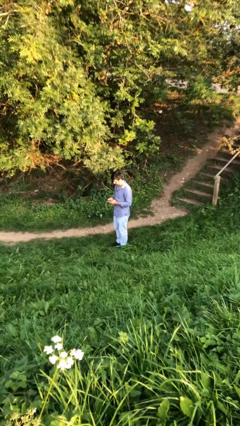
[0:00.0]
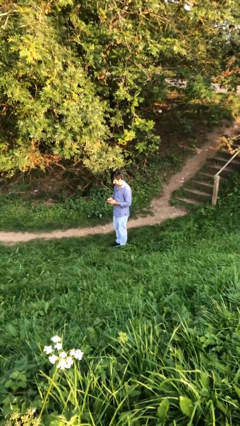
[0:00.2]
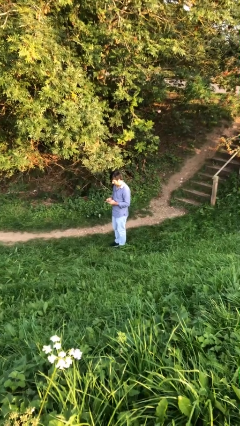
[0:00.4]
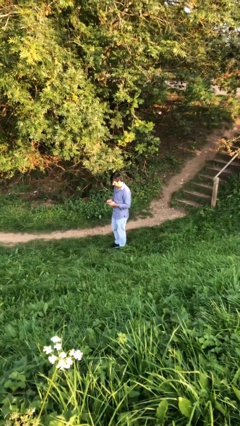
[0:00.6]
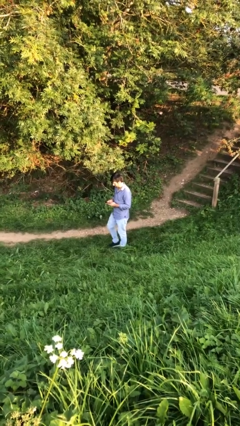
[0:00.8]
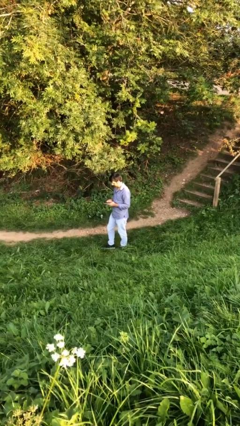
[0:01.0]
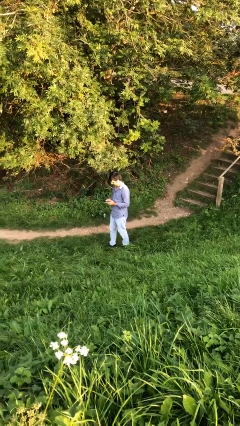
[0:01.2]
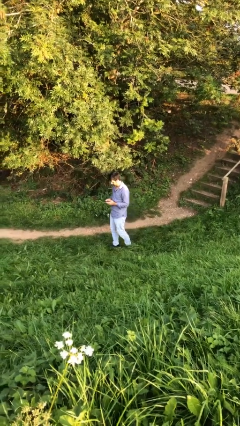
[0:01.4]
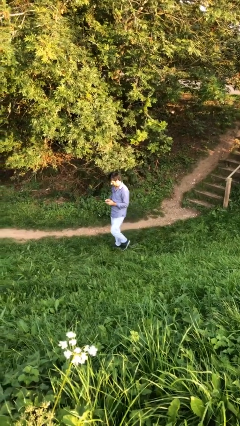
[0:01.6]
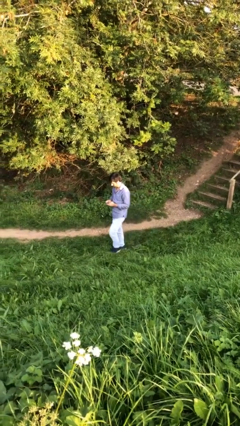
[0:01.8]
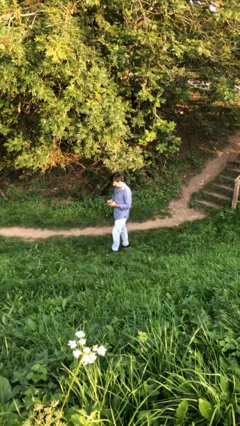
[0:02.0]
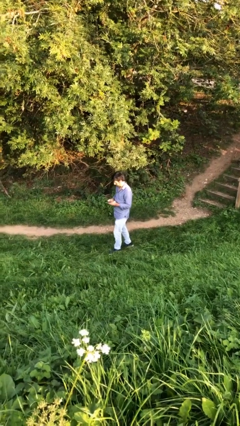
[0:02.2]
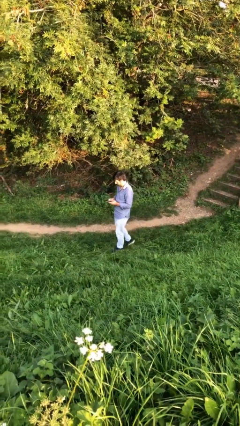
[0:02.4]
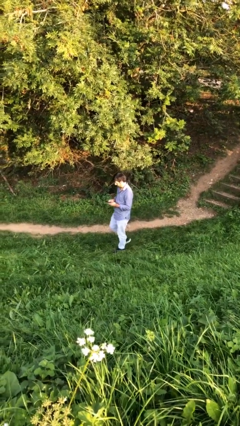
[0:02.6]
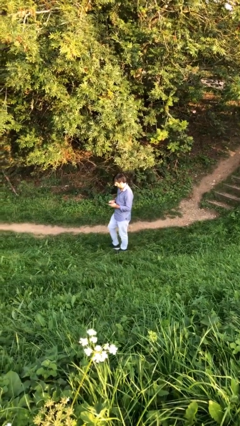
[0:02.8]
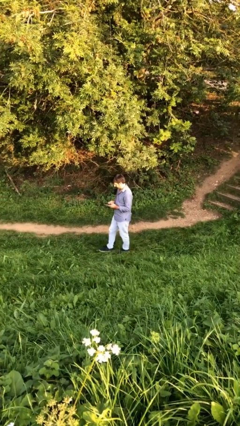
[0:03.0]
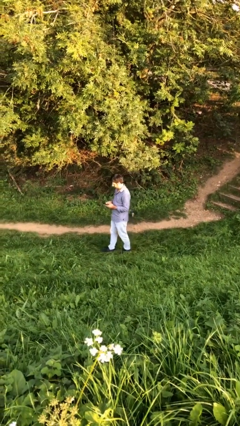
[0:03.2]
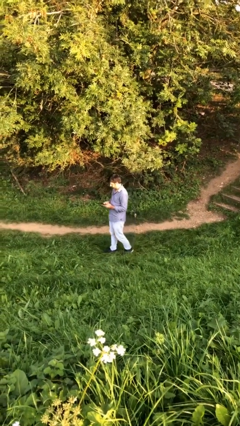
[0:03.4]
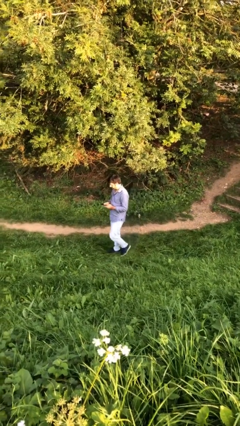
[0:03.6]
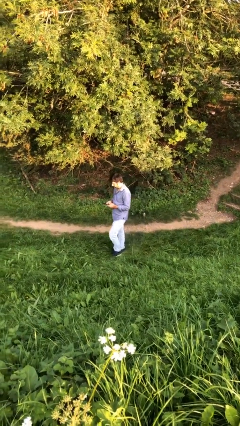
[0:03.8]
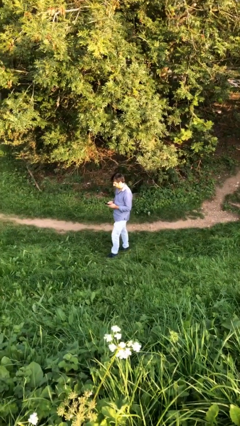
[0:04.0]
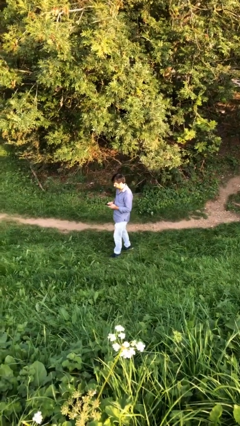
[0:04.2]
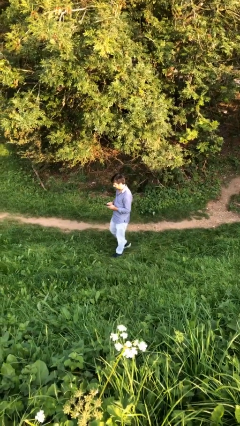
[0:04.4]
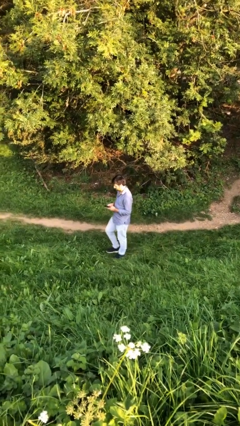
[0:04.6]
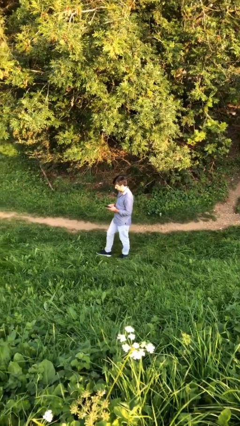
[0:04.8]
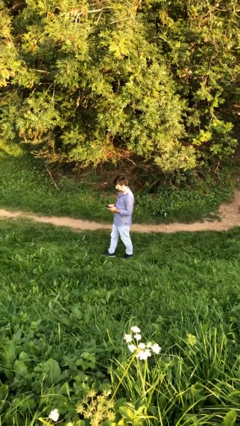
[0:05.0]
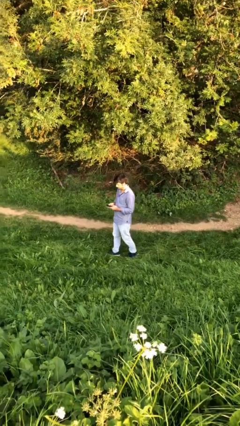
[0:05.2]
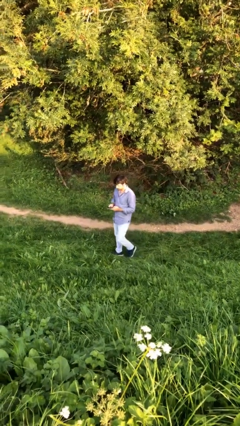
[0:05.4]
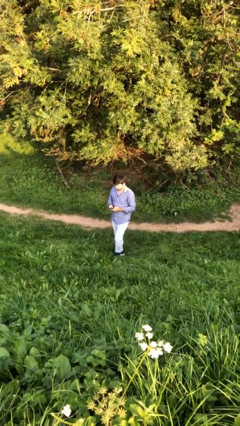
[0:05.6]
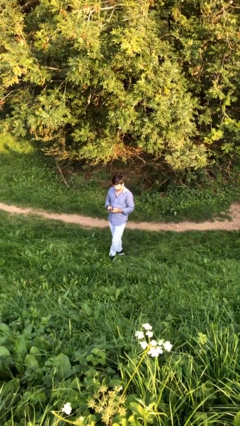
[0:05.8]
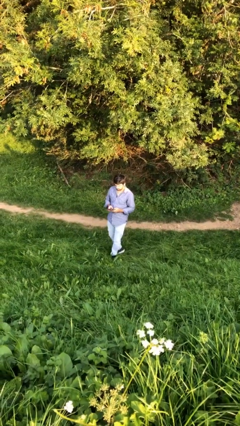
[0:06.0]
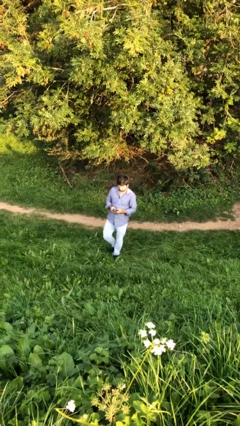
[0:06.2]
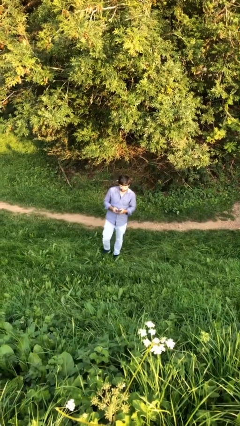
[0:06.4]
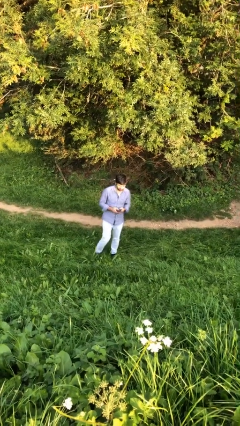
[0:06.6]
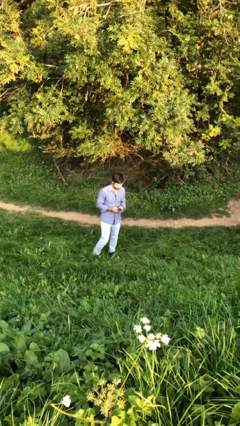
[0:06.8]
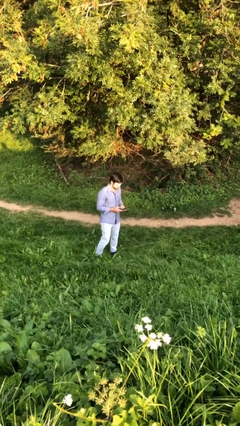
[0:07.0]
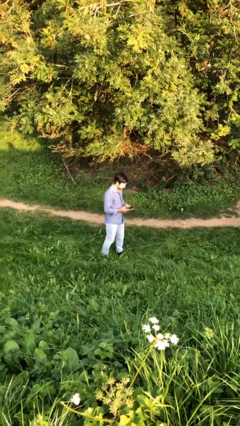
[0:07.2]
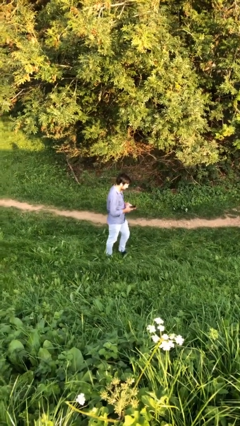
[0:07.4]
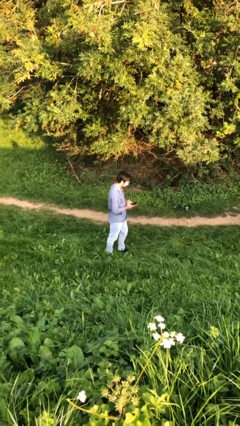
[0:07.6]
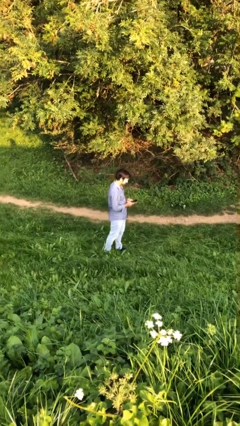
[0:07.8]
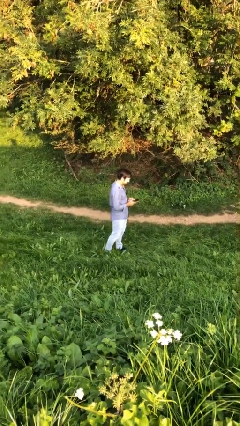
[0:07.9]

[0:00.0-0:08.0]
person texts on phone

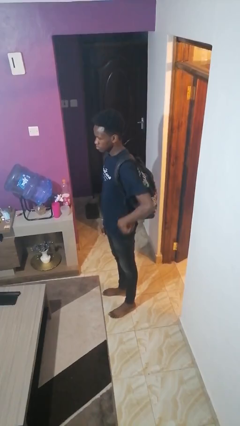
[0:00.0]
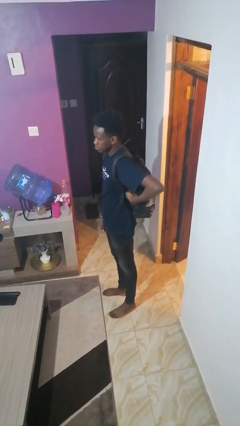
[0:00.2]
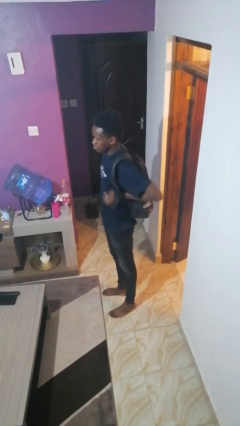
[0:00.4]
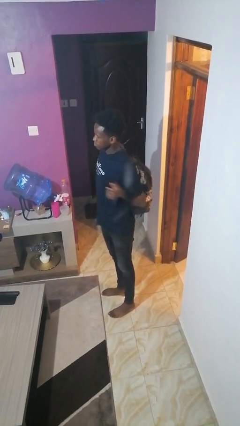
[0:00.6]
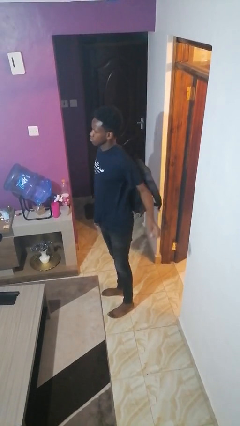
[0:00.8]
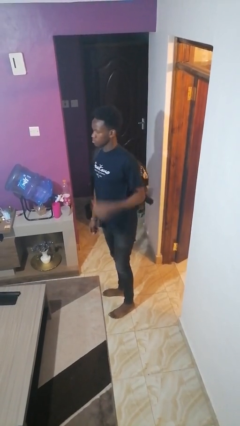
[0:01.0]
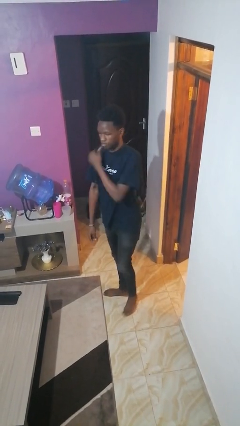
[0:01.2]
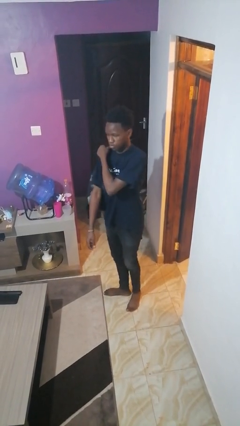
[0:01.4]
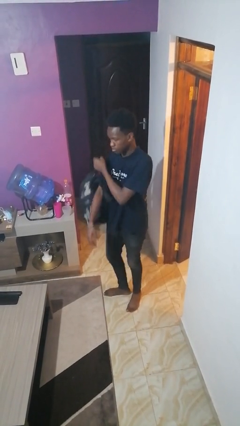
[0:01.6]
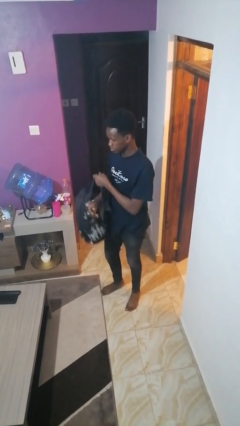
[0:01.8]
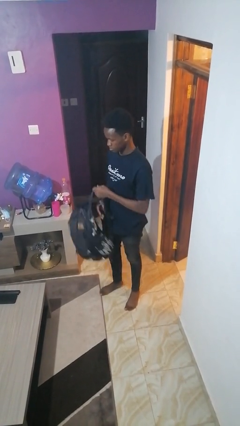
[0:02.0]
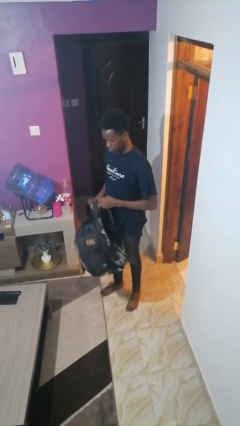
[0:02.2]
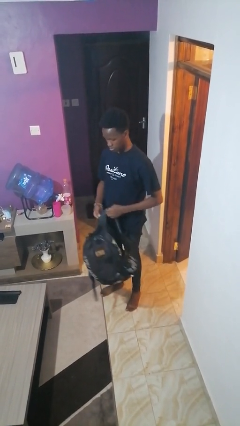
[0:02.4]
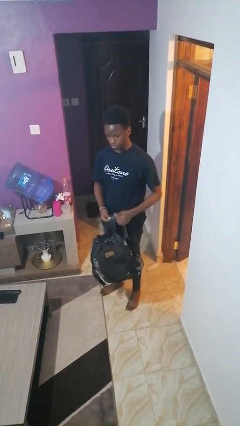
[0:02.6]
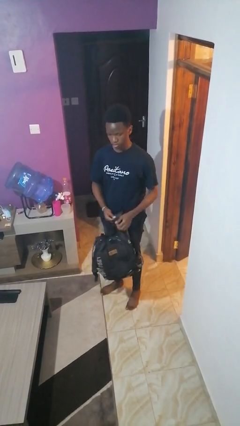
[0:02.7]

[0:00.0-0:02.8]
person takes off backpack

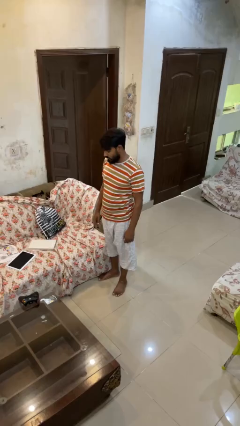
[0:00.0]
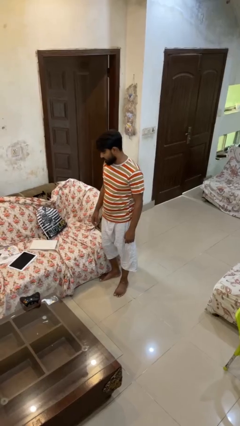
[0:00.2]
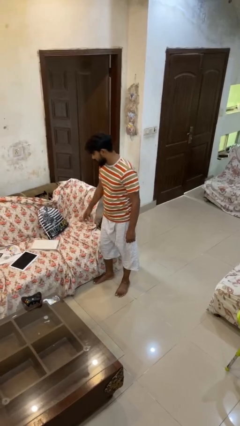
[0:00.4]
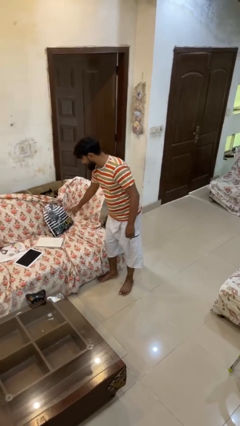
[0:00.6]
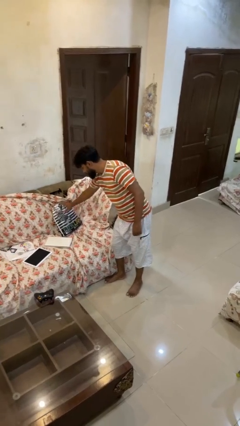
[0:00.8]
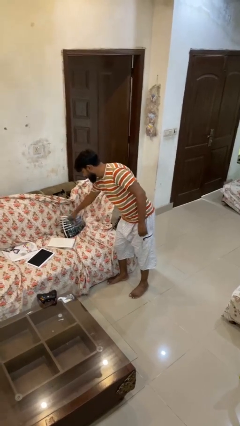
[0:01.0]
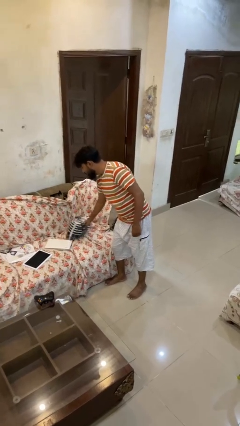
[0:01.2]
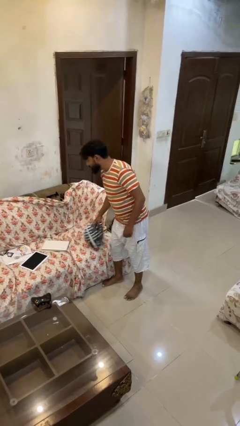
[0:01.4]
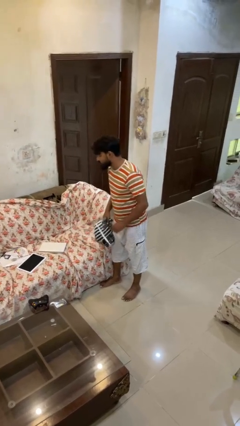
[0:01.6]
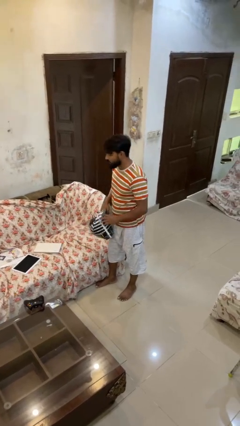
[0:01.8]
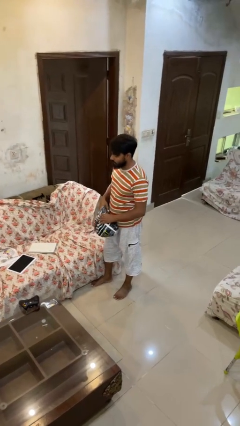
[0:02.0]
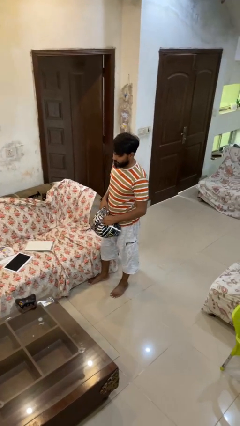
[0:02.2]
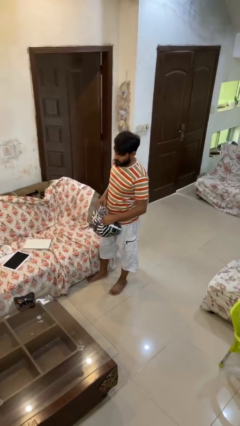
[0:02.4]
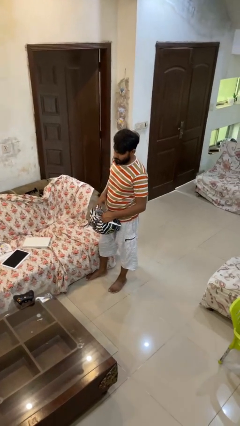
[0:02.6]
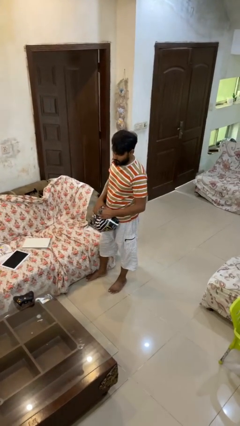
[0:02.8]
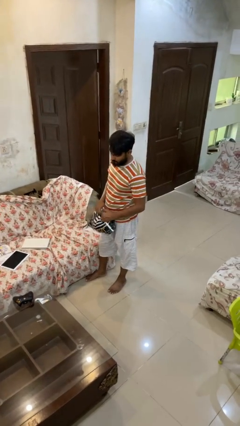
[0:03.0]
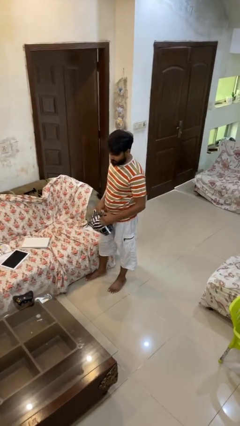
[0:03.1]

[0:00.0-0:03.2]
person picks up object from couch

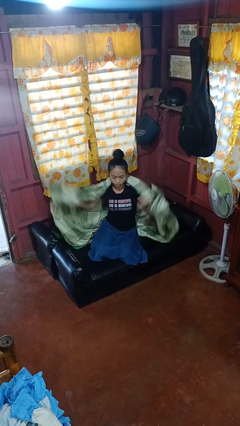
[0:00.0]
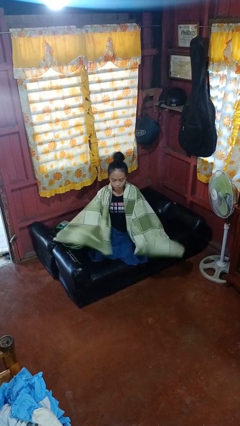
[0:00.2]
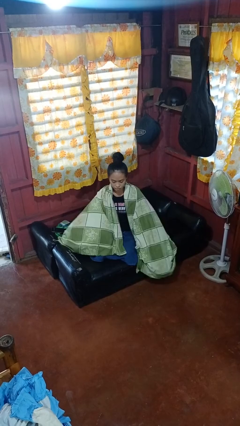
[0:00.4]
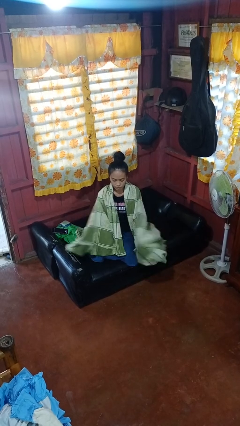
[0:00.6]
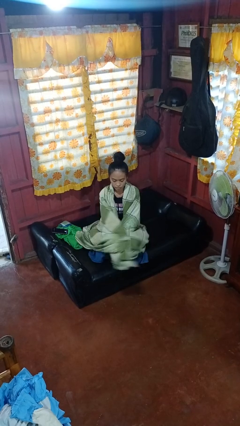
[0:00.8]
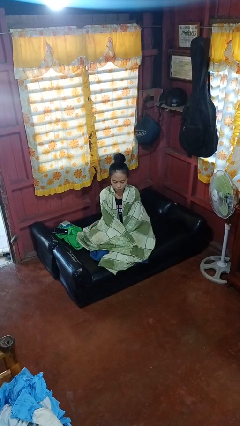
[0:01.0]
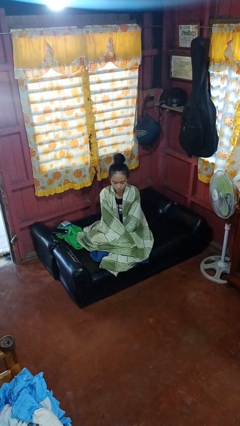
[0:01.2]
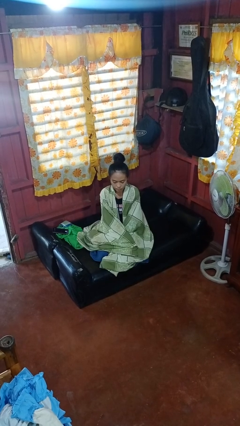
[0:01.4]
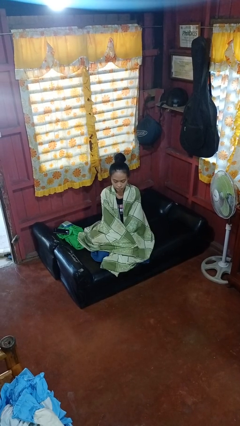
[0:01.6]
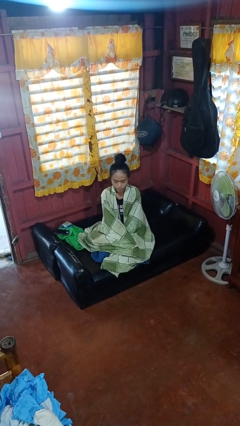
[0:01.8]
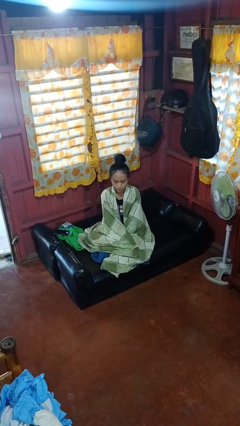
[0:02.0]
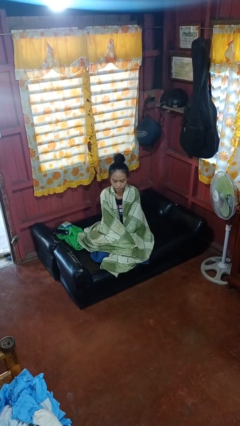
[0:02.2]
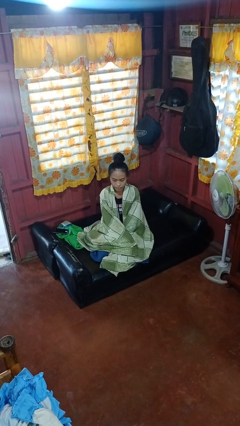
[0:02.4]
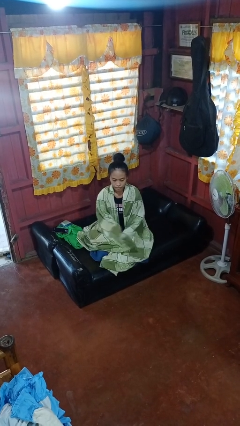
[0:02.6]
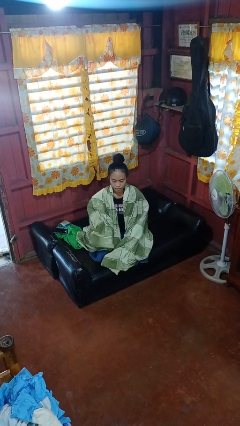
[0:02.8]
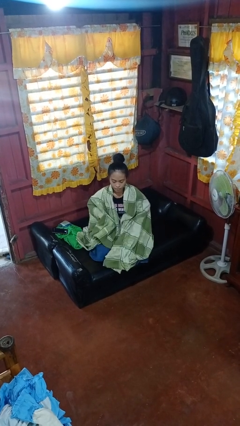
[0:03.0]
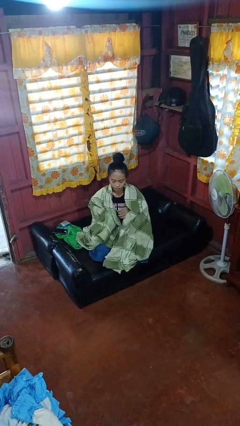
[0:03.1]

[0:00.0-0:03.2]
person covers with blanket

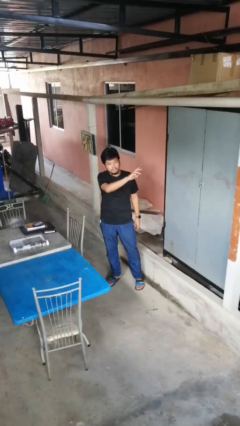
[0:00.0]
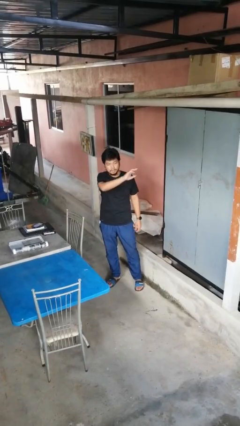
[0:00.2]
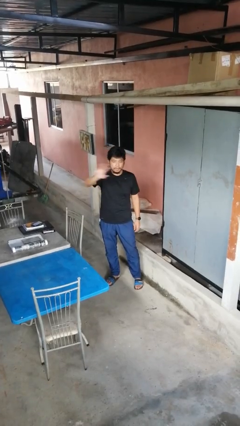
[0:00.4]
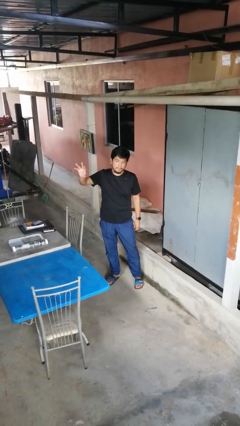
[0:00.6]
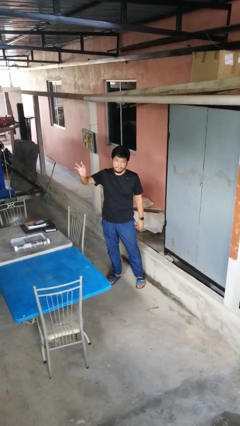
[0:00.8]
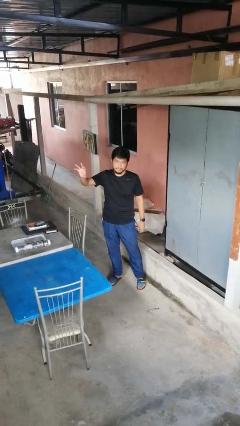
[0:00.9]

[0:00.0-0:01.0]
person gestures swipe right
